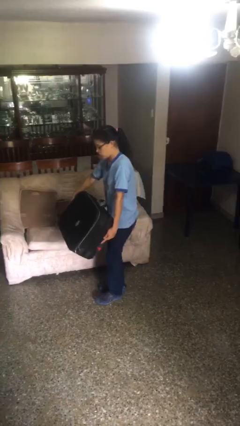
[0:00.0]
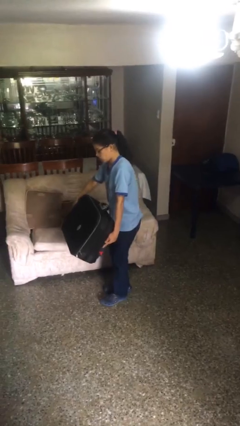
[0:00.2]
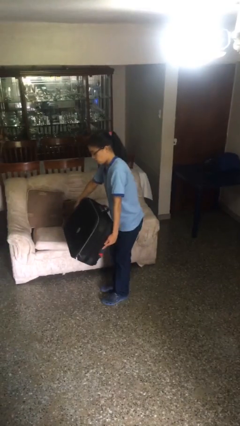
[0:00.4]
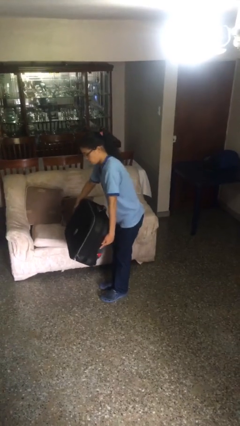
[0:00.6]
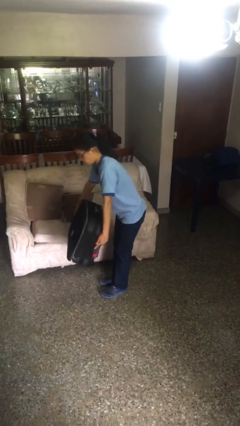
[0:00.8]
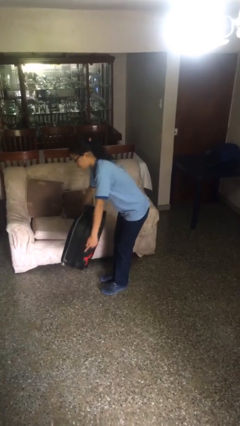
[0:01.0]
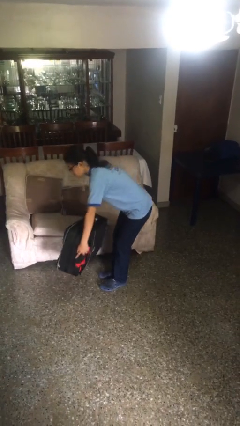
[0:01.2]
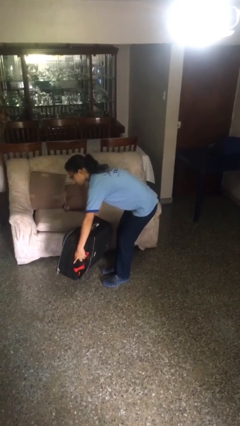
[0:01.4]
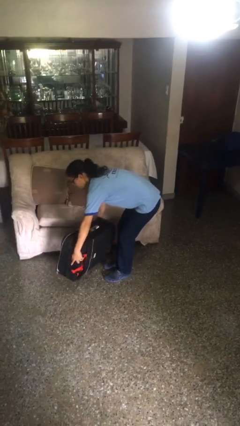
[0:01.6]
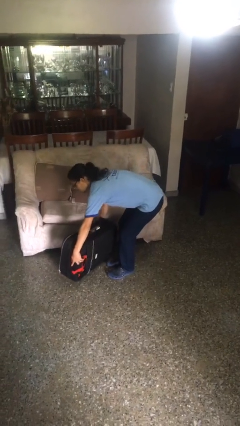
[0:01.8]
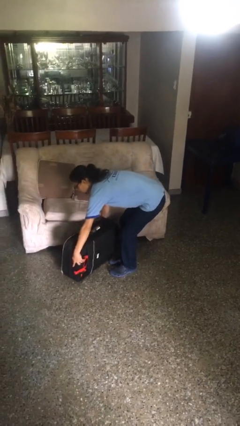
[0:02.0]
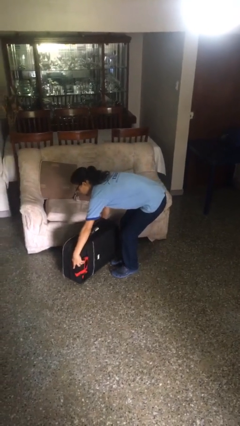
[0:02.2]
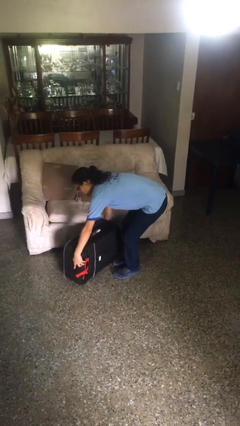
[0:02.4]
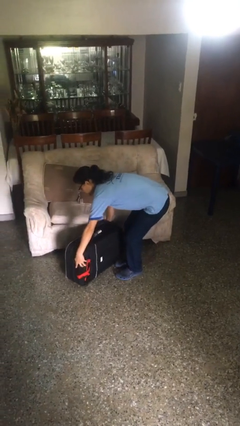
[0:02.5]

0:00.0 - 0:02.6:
person puts down object on floor

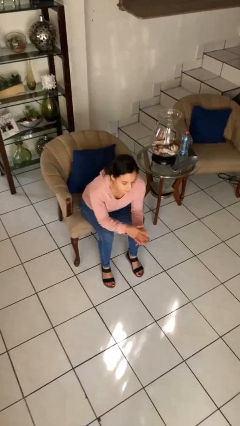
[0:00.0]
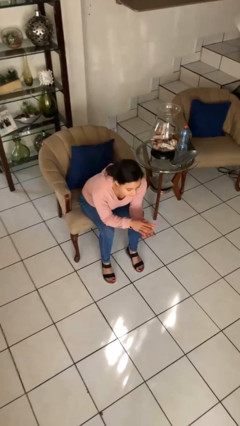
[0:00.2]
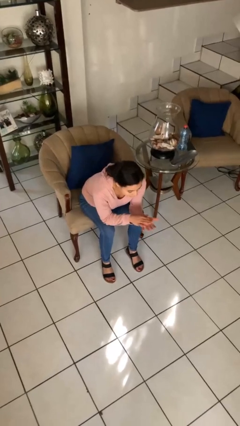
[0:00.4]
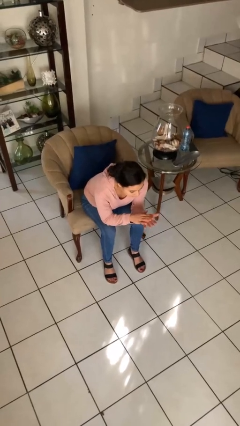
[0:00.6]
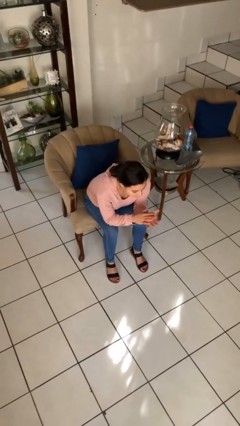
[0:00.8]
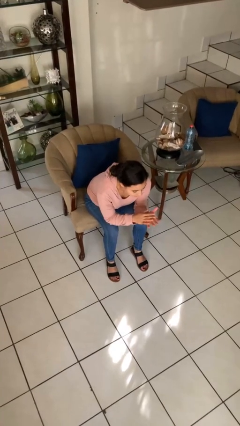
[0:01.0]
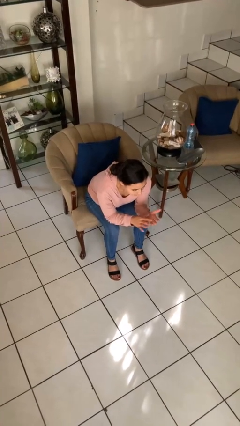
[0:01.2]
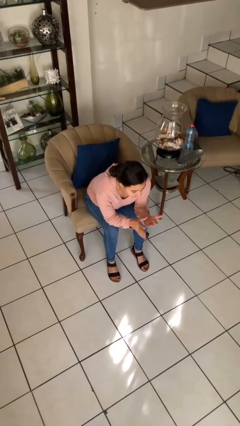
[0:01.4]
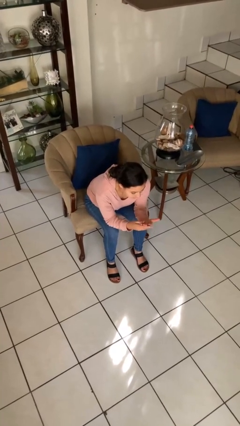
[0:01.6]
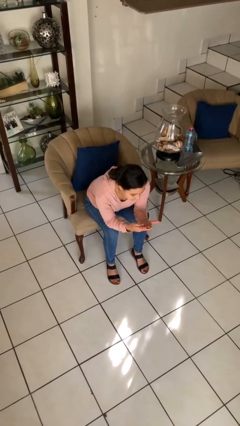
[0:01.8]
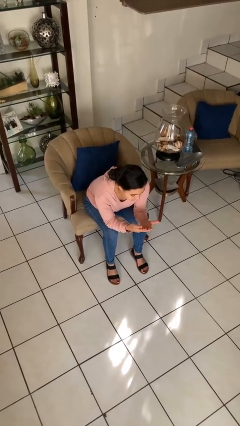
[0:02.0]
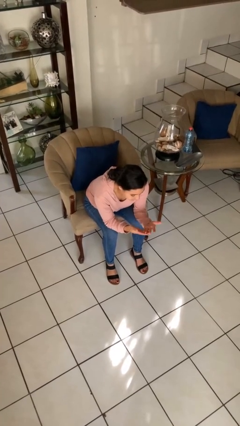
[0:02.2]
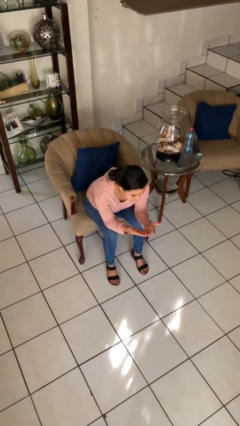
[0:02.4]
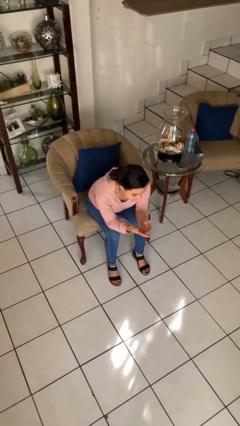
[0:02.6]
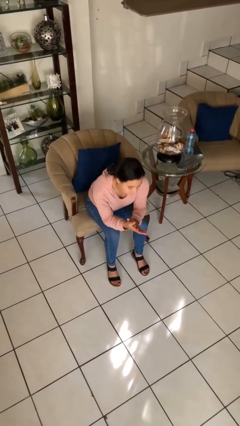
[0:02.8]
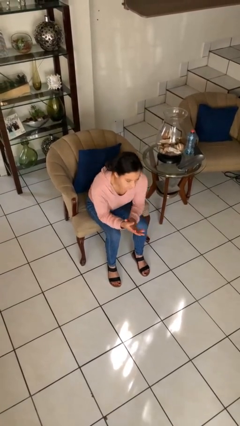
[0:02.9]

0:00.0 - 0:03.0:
person looks at hands in lap

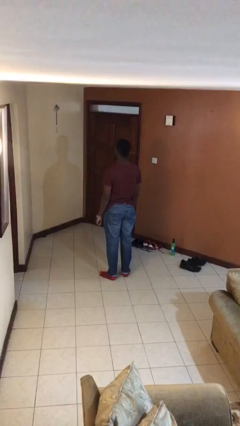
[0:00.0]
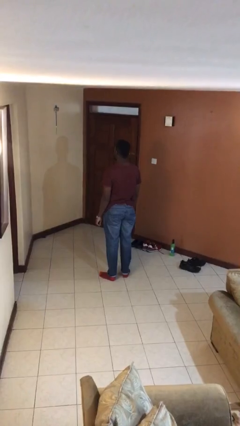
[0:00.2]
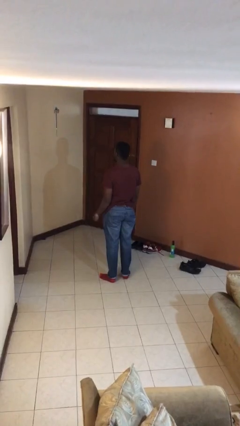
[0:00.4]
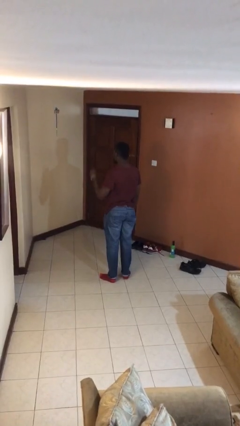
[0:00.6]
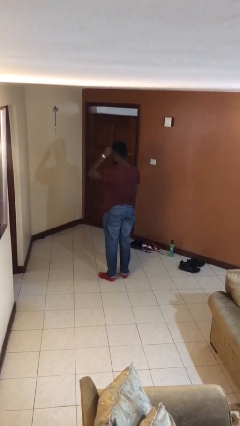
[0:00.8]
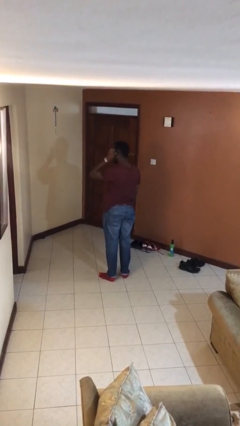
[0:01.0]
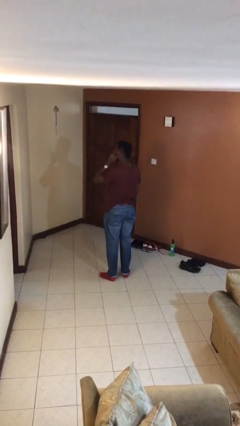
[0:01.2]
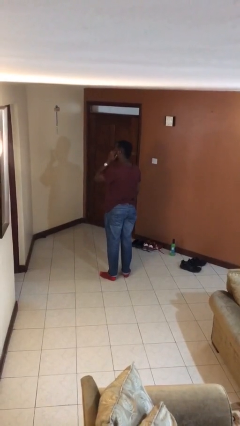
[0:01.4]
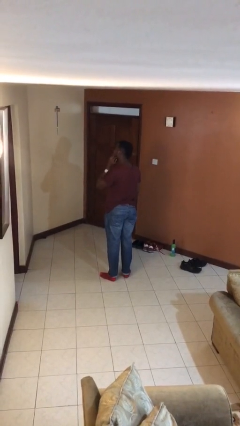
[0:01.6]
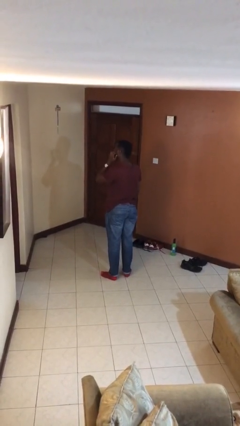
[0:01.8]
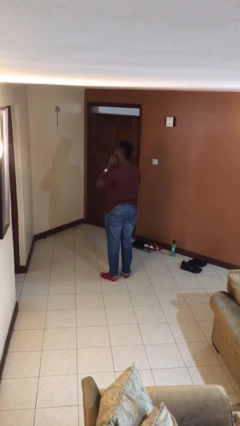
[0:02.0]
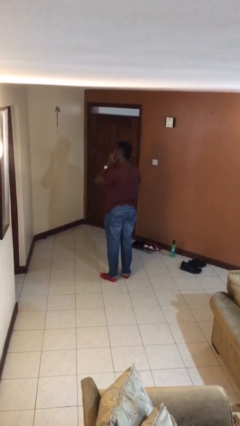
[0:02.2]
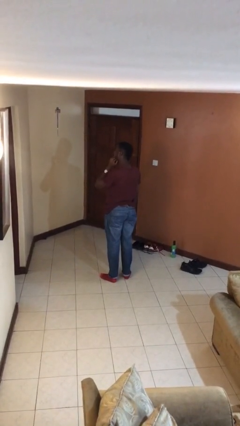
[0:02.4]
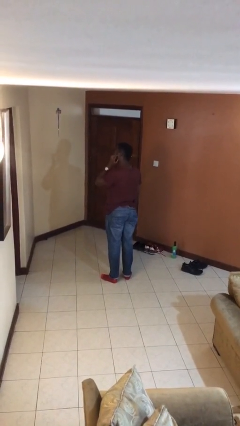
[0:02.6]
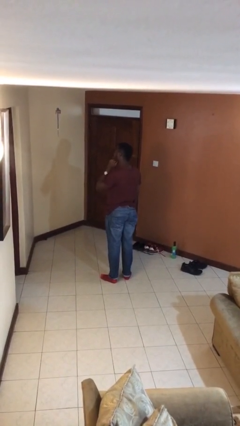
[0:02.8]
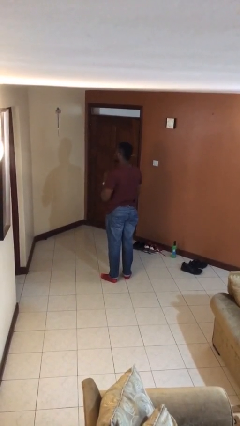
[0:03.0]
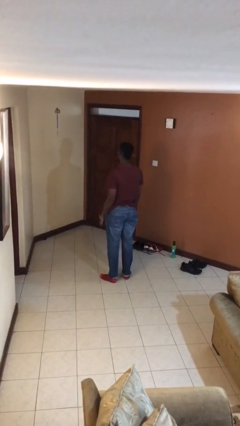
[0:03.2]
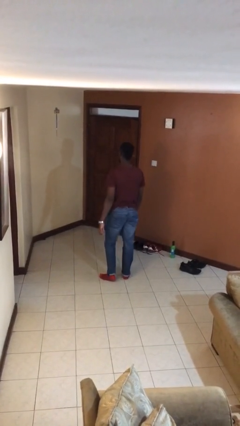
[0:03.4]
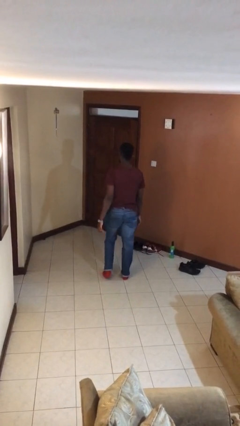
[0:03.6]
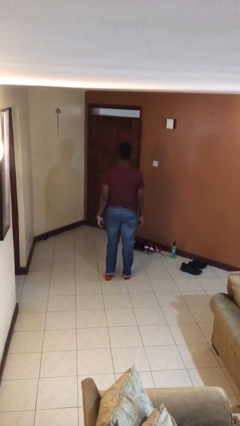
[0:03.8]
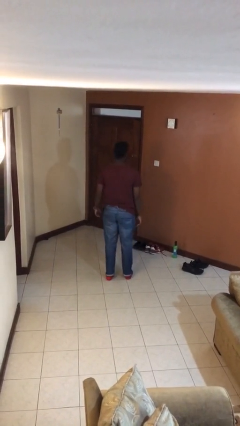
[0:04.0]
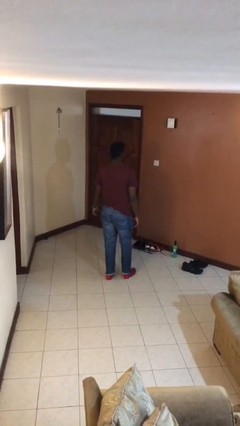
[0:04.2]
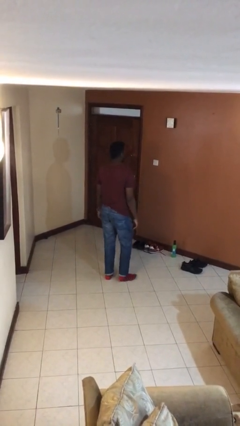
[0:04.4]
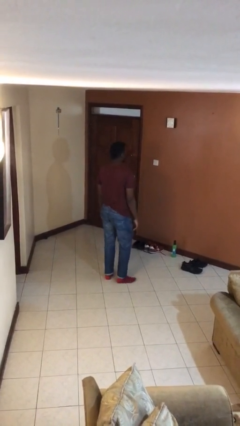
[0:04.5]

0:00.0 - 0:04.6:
person scratches face

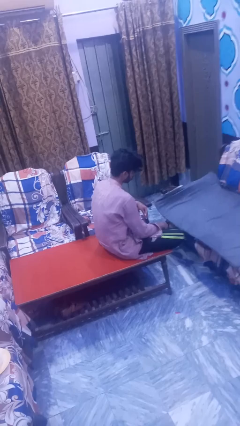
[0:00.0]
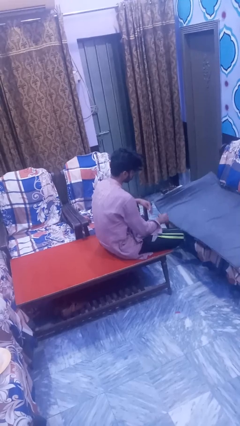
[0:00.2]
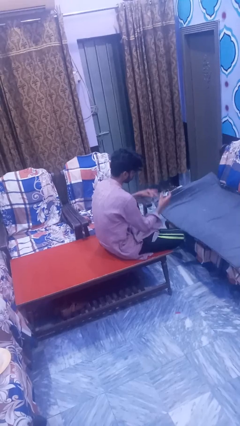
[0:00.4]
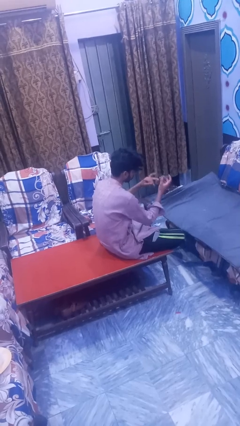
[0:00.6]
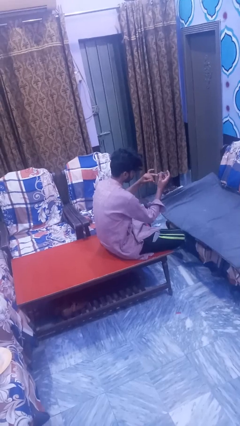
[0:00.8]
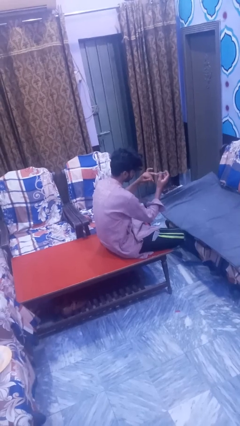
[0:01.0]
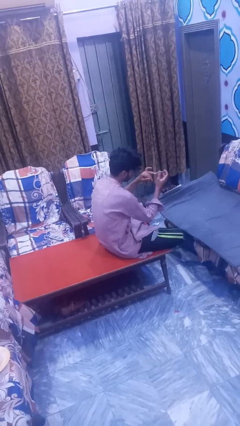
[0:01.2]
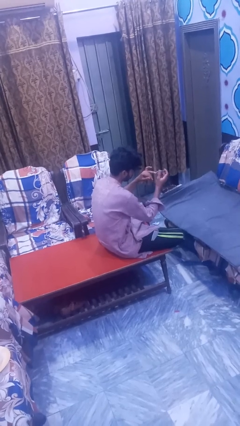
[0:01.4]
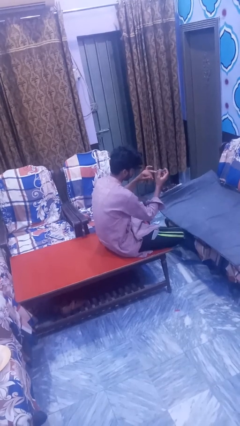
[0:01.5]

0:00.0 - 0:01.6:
person clips fingernails

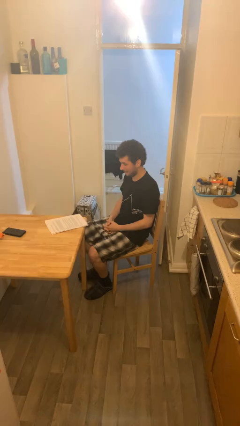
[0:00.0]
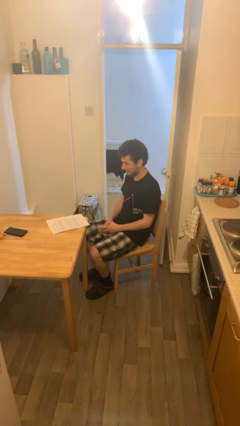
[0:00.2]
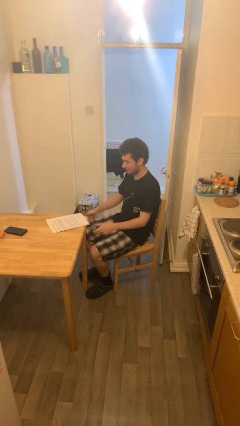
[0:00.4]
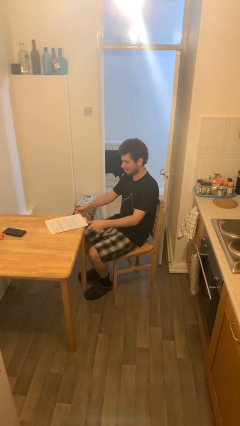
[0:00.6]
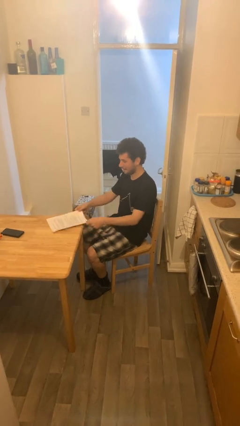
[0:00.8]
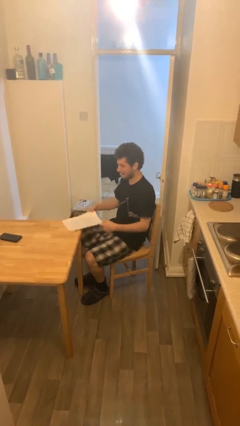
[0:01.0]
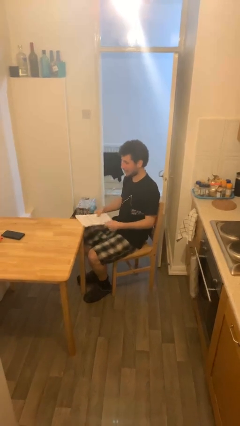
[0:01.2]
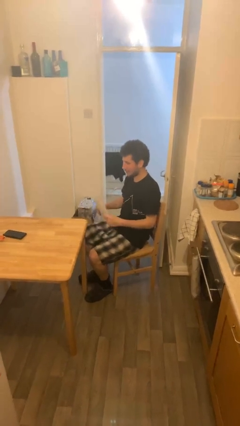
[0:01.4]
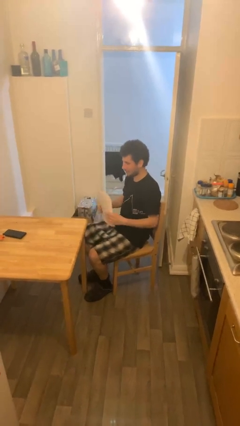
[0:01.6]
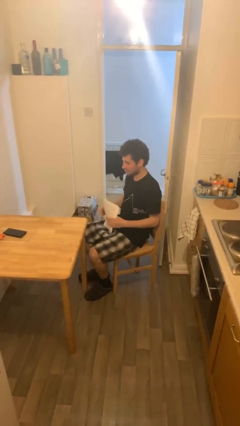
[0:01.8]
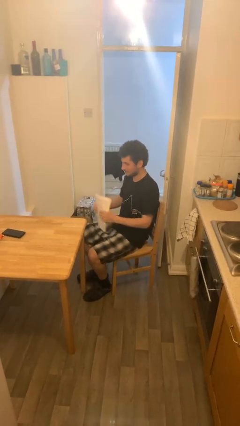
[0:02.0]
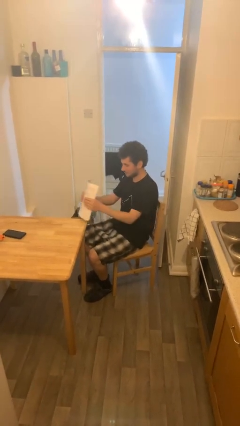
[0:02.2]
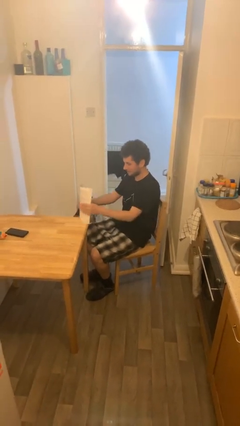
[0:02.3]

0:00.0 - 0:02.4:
person picks up object from table

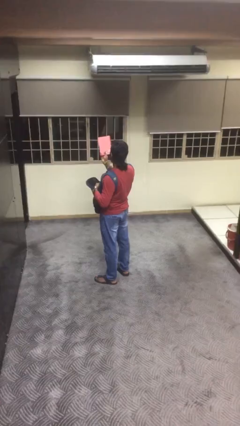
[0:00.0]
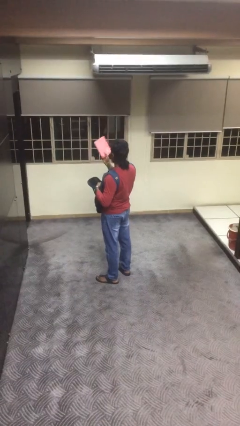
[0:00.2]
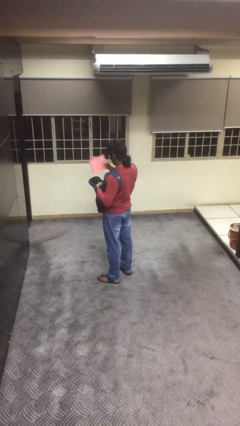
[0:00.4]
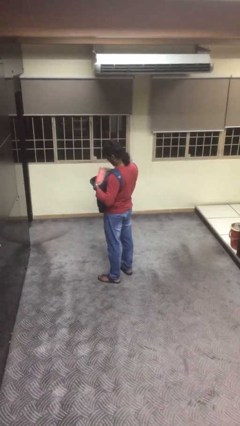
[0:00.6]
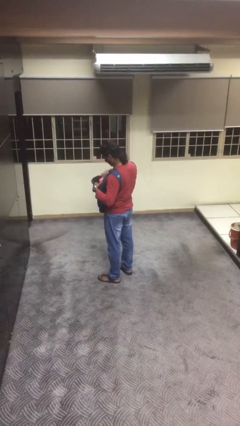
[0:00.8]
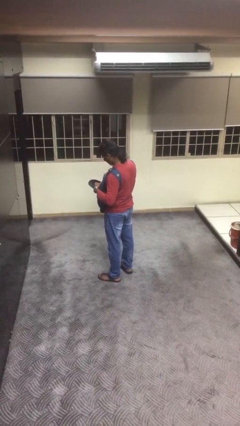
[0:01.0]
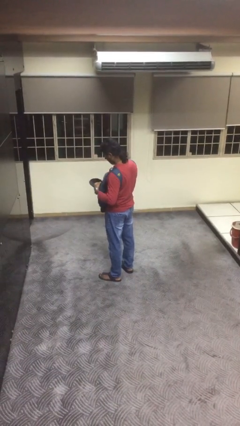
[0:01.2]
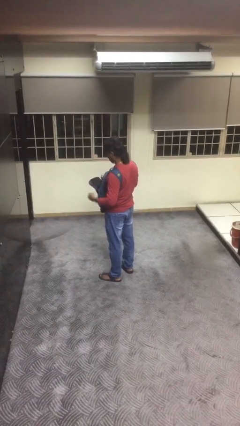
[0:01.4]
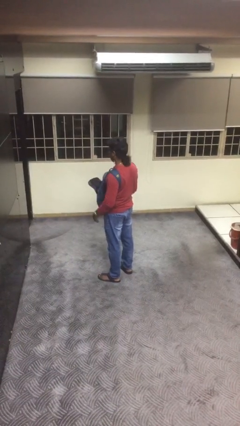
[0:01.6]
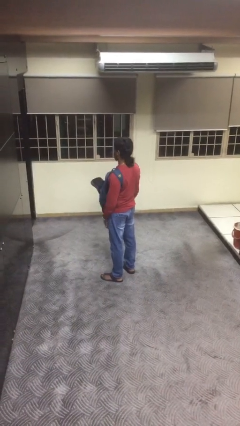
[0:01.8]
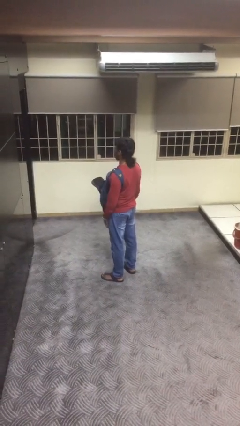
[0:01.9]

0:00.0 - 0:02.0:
person puts object into backpack

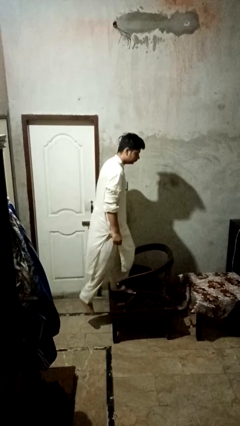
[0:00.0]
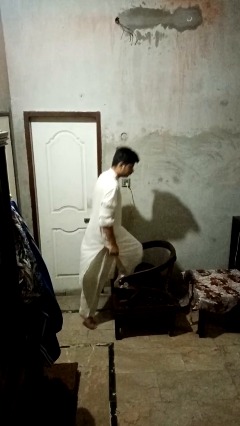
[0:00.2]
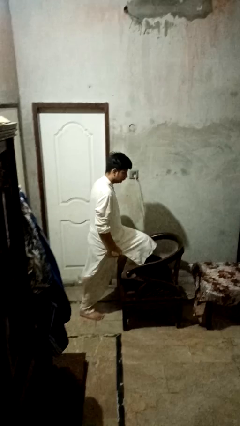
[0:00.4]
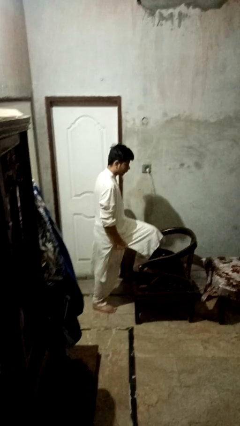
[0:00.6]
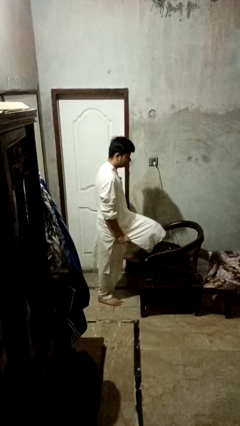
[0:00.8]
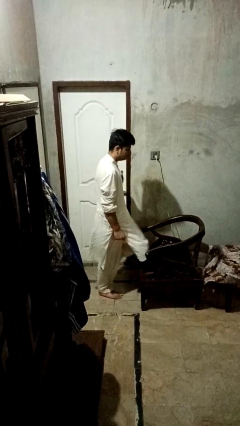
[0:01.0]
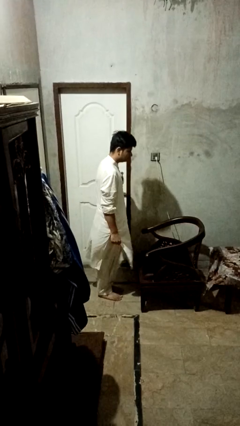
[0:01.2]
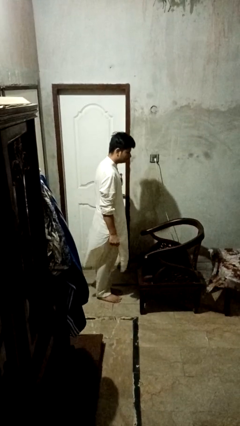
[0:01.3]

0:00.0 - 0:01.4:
person climbs off couch
